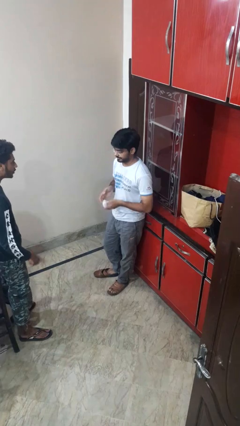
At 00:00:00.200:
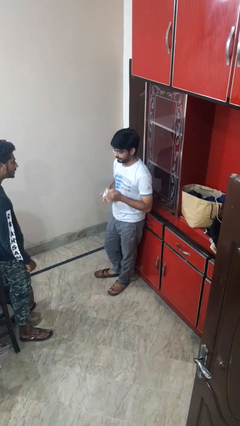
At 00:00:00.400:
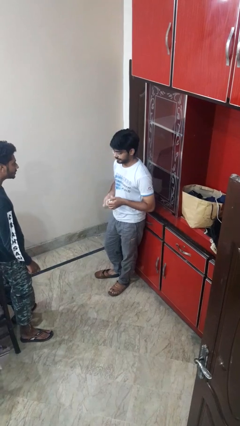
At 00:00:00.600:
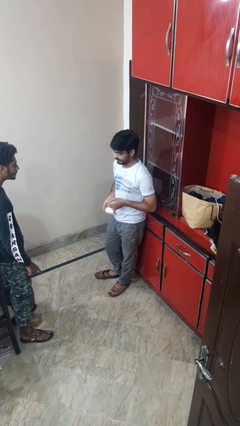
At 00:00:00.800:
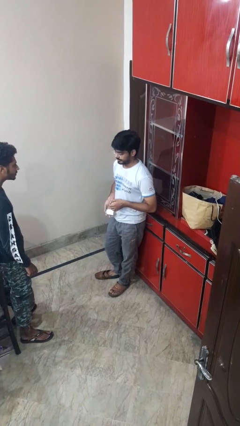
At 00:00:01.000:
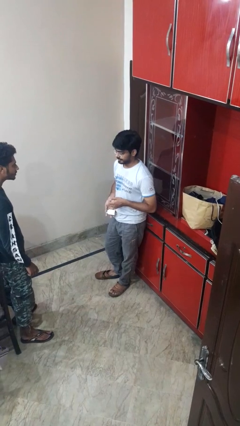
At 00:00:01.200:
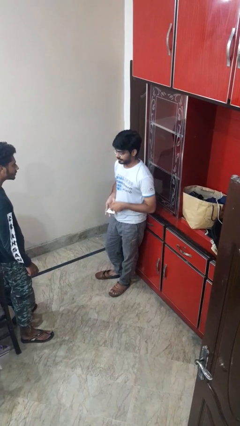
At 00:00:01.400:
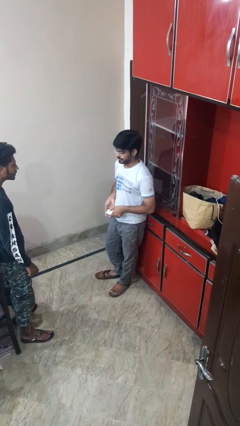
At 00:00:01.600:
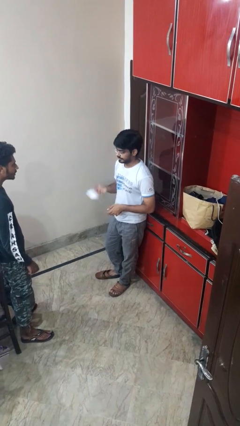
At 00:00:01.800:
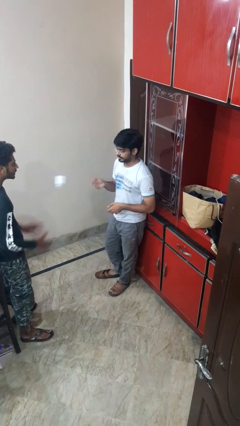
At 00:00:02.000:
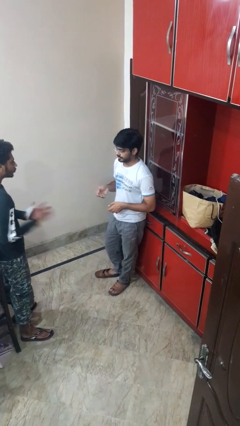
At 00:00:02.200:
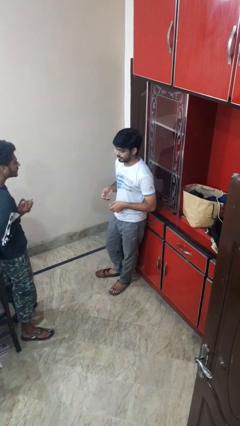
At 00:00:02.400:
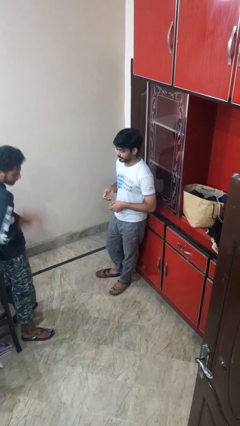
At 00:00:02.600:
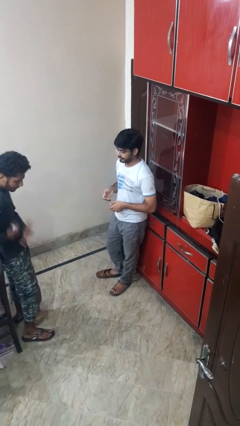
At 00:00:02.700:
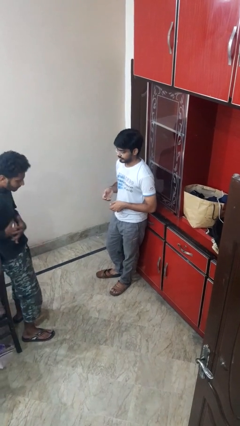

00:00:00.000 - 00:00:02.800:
person throws object to person

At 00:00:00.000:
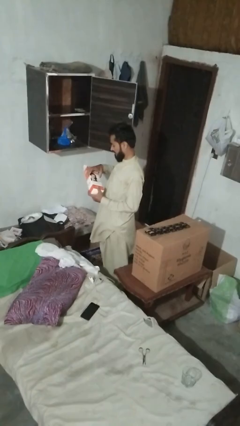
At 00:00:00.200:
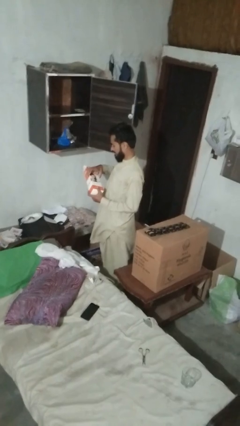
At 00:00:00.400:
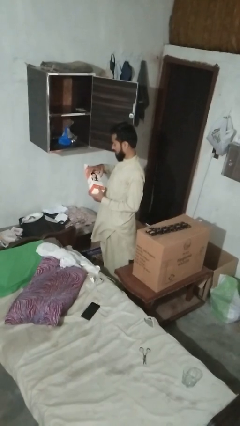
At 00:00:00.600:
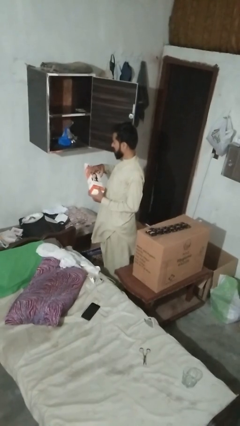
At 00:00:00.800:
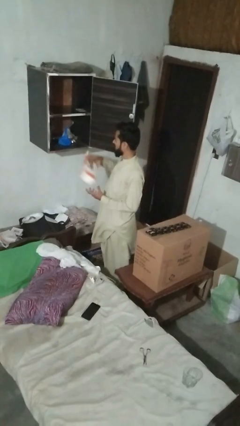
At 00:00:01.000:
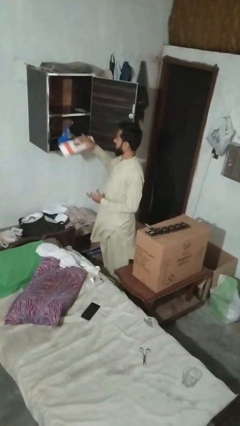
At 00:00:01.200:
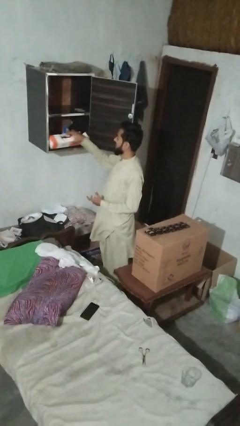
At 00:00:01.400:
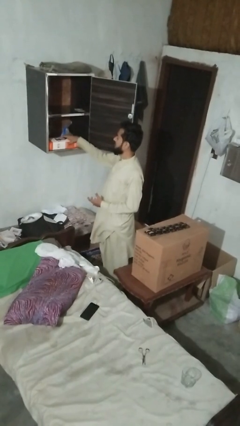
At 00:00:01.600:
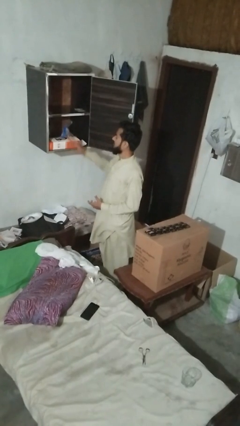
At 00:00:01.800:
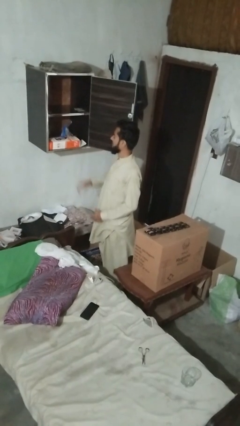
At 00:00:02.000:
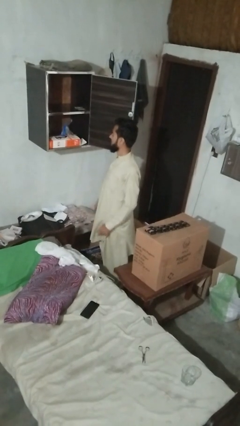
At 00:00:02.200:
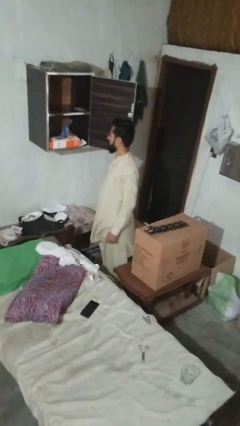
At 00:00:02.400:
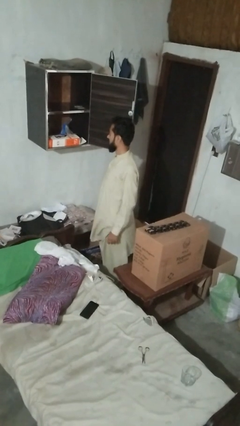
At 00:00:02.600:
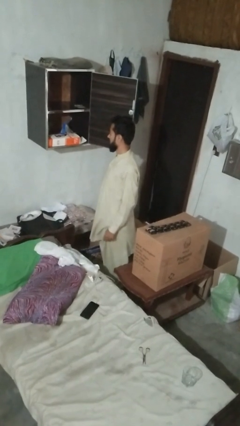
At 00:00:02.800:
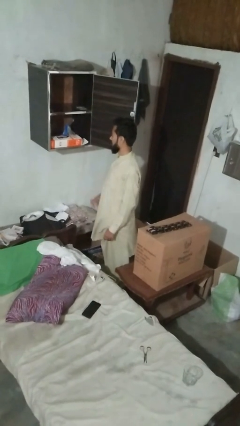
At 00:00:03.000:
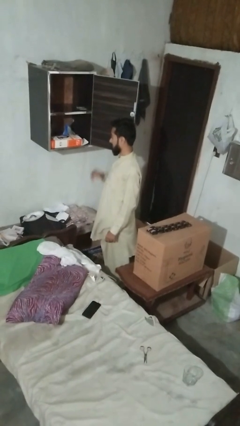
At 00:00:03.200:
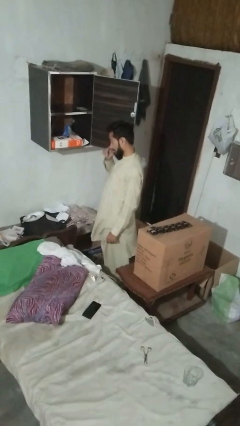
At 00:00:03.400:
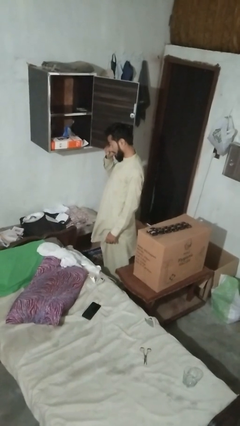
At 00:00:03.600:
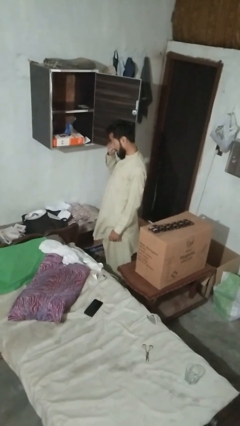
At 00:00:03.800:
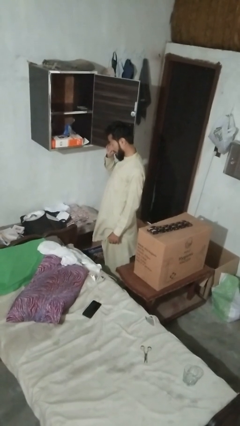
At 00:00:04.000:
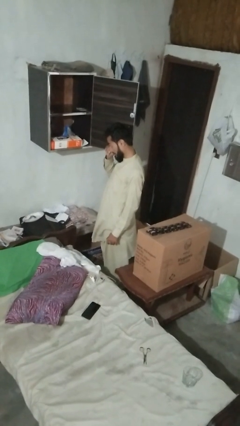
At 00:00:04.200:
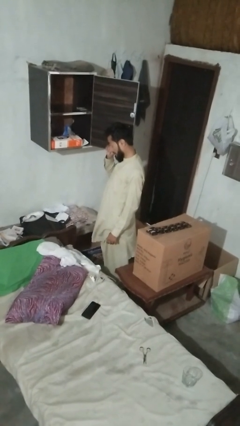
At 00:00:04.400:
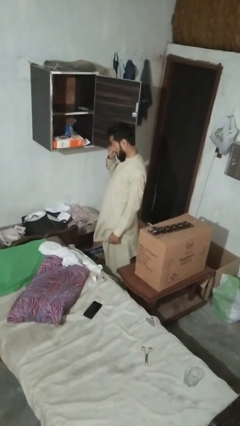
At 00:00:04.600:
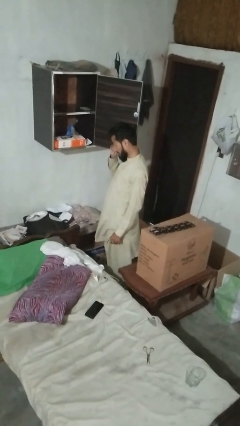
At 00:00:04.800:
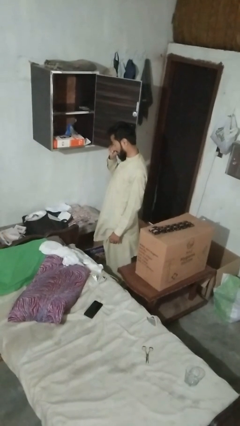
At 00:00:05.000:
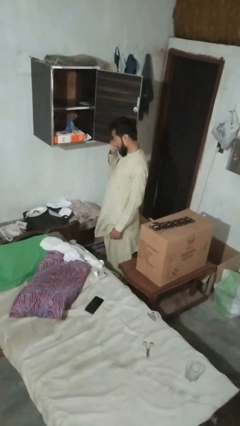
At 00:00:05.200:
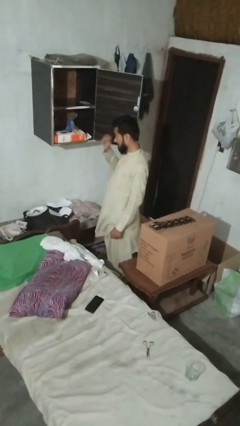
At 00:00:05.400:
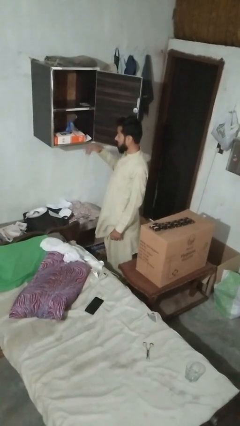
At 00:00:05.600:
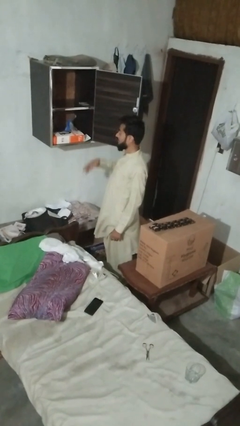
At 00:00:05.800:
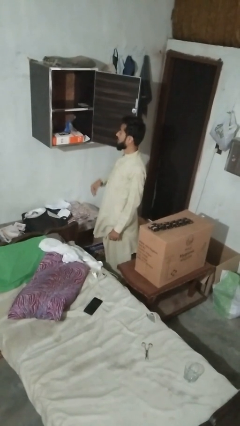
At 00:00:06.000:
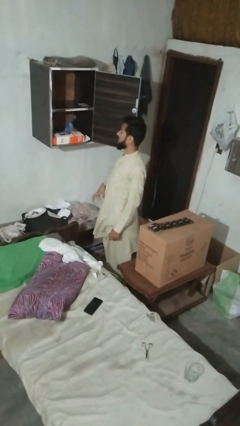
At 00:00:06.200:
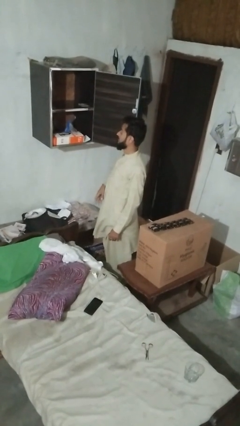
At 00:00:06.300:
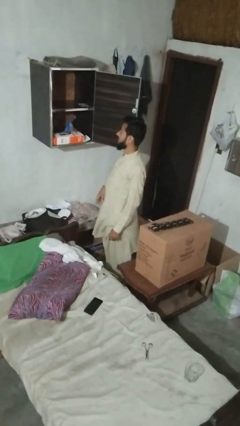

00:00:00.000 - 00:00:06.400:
person puts down object into cabinet

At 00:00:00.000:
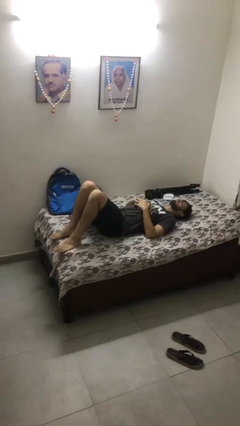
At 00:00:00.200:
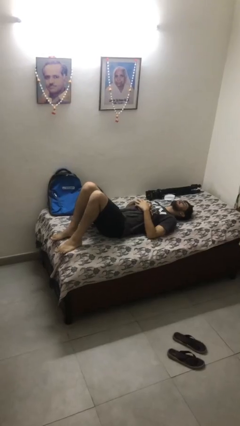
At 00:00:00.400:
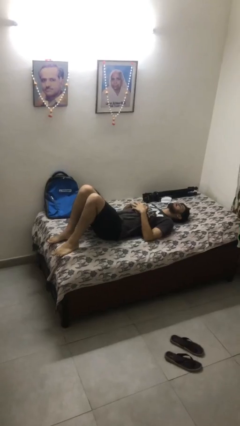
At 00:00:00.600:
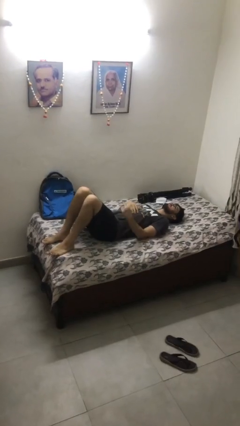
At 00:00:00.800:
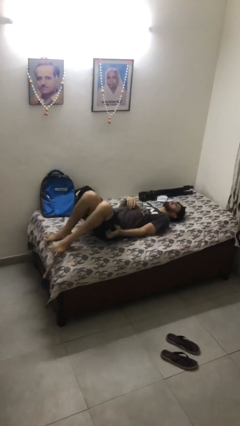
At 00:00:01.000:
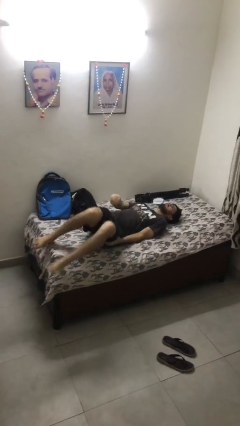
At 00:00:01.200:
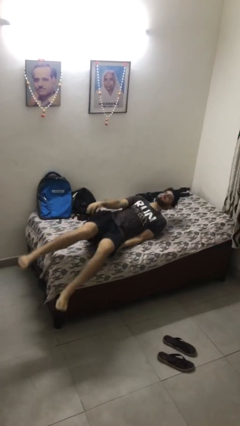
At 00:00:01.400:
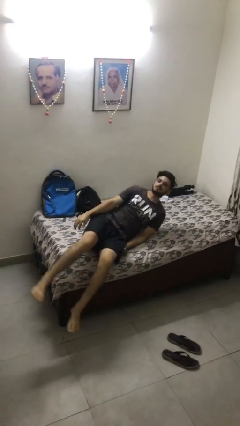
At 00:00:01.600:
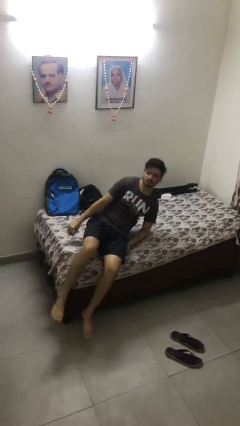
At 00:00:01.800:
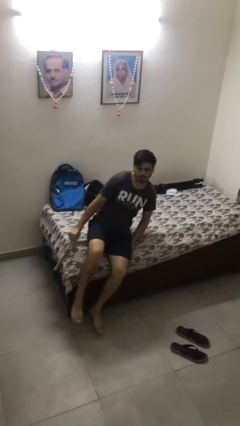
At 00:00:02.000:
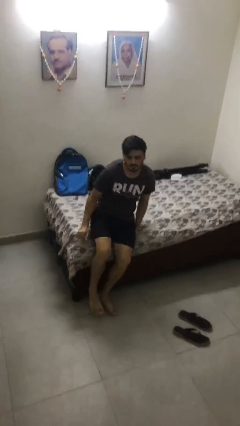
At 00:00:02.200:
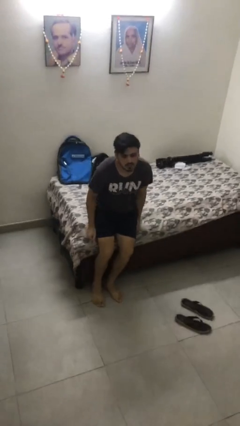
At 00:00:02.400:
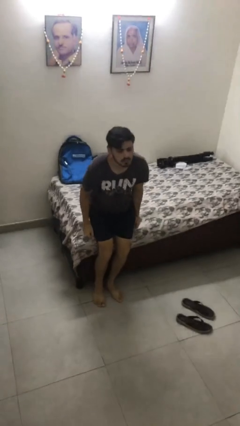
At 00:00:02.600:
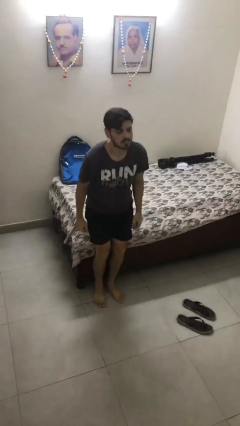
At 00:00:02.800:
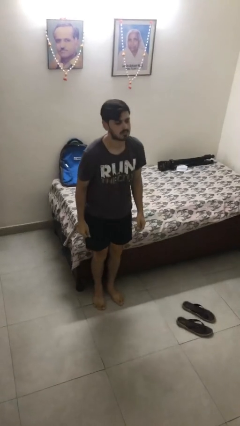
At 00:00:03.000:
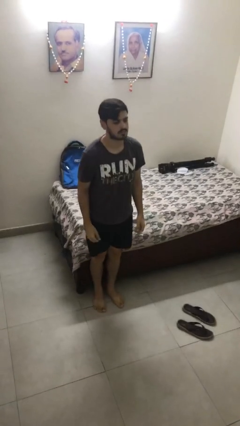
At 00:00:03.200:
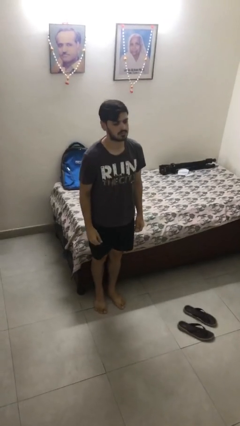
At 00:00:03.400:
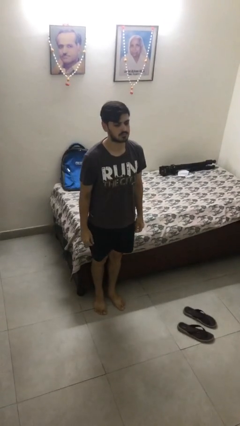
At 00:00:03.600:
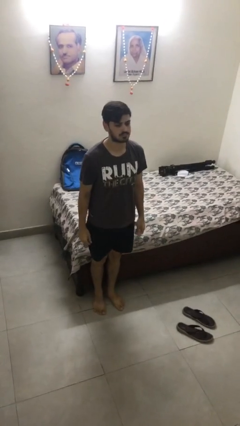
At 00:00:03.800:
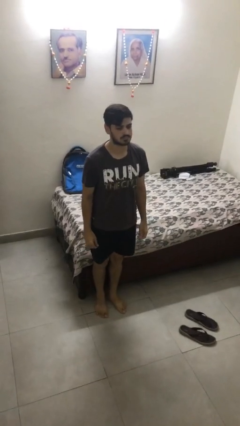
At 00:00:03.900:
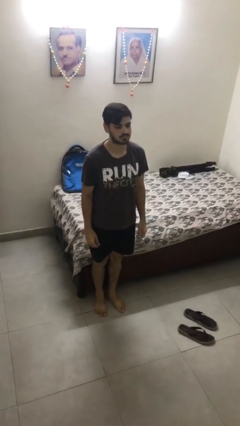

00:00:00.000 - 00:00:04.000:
person stands up

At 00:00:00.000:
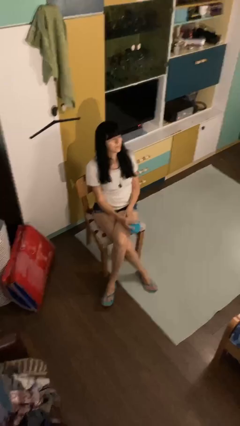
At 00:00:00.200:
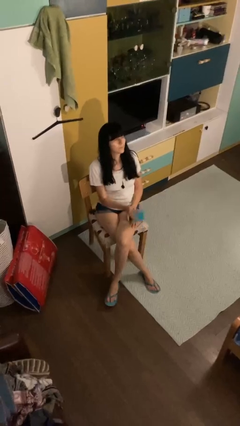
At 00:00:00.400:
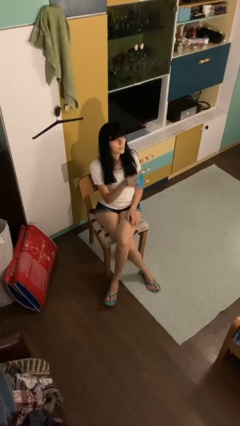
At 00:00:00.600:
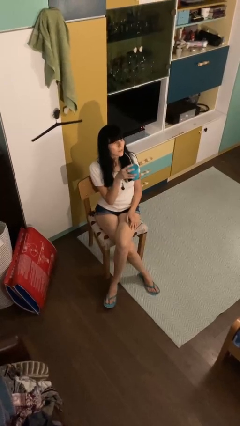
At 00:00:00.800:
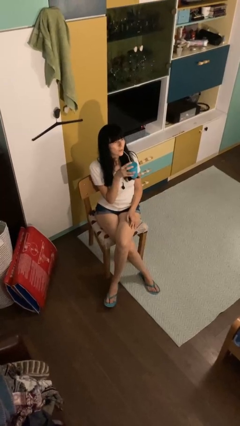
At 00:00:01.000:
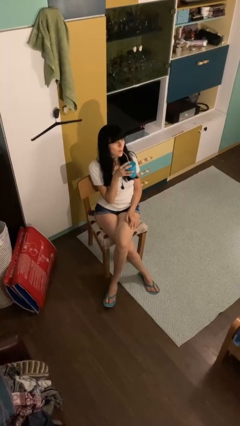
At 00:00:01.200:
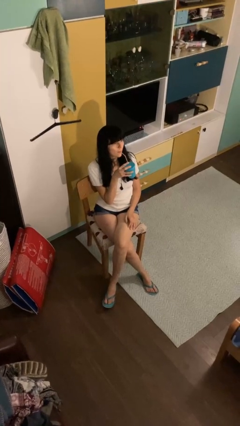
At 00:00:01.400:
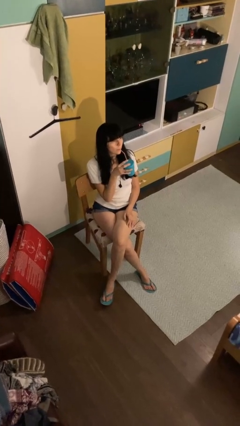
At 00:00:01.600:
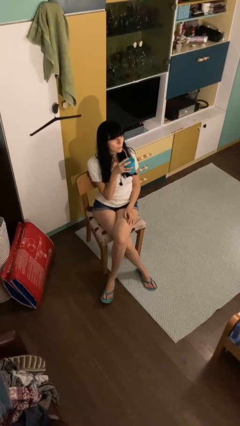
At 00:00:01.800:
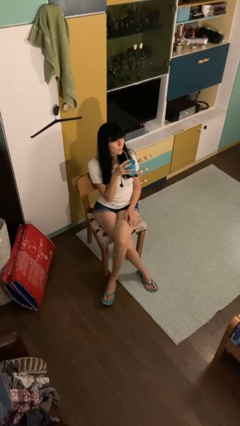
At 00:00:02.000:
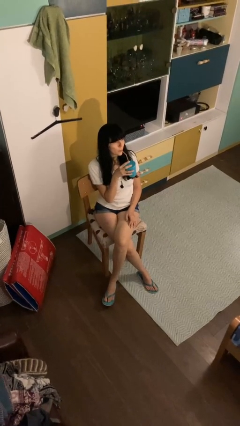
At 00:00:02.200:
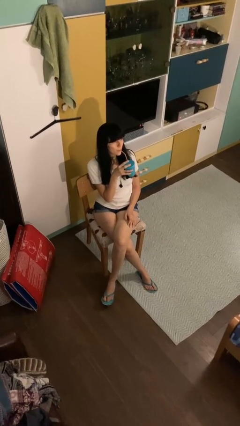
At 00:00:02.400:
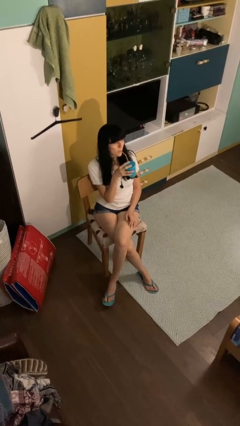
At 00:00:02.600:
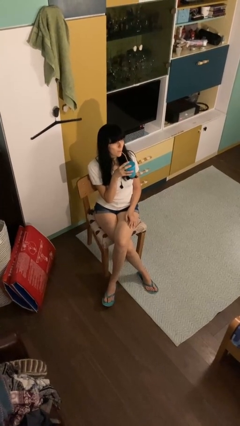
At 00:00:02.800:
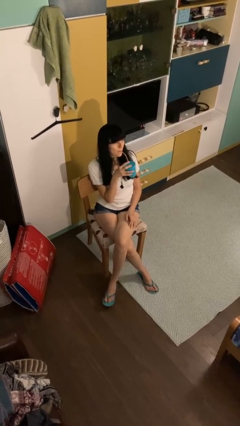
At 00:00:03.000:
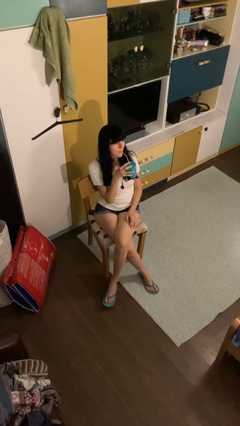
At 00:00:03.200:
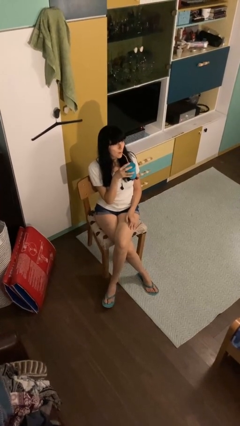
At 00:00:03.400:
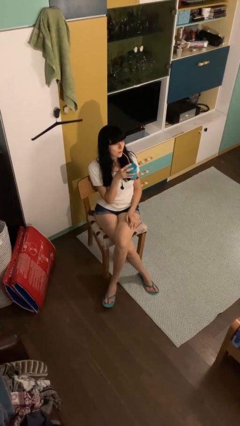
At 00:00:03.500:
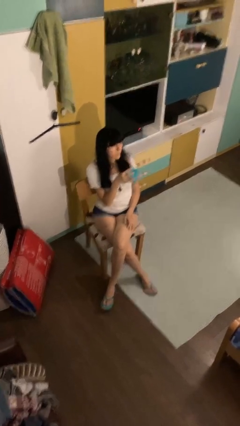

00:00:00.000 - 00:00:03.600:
person drinks from straw

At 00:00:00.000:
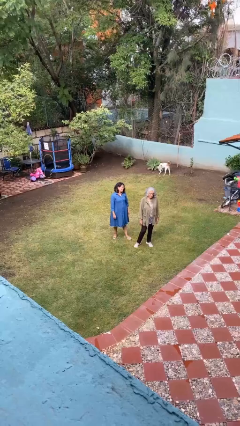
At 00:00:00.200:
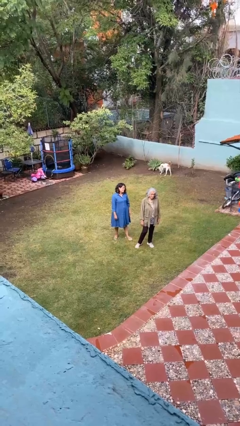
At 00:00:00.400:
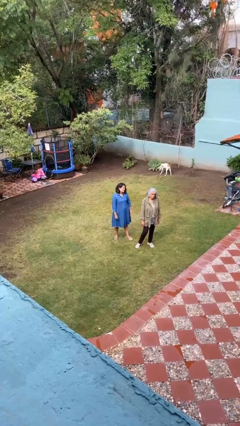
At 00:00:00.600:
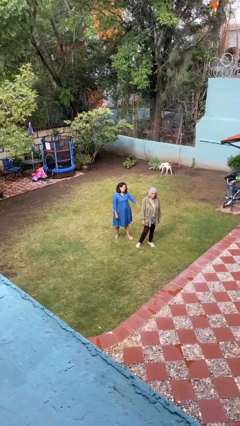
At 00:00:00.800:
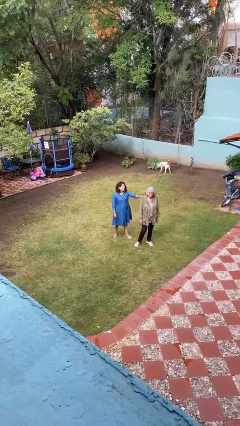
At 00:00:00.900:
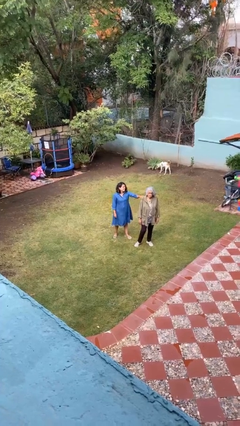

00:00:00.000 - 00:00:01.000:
person grabs person by shoulder
